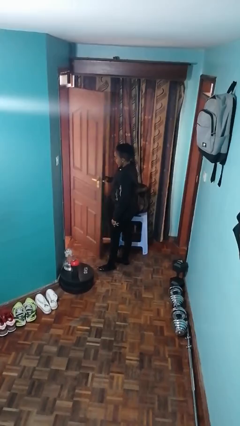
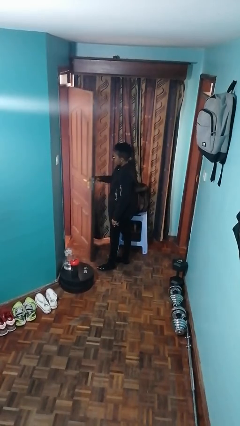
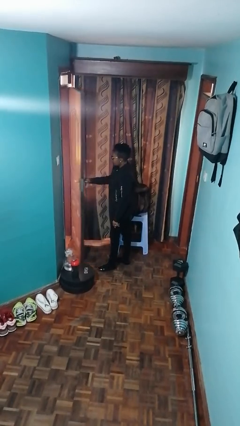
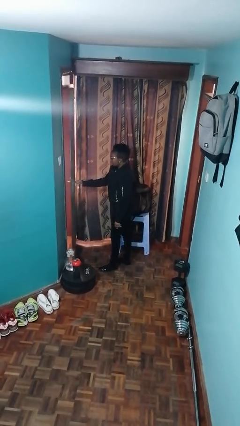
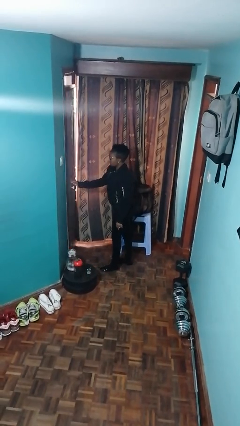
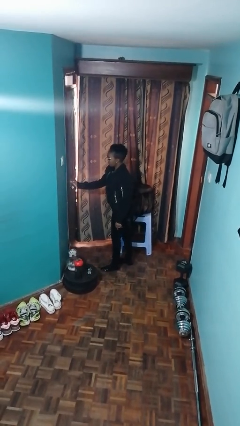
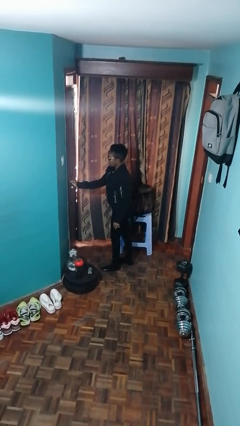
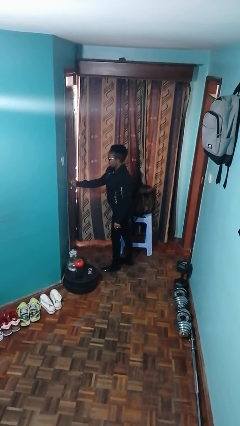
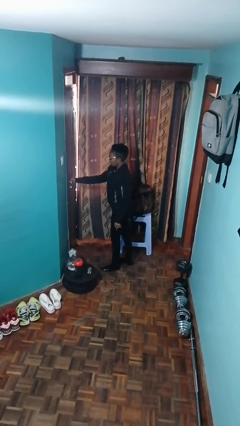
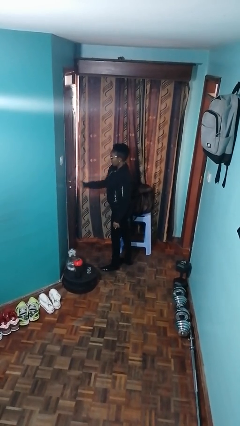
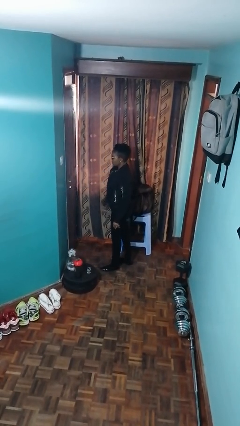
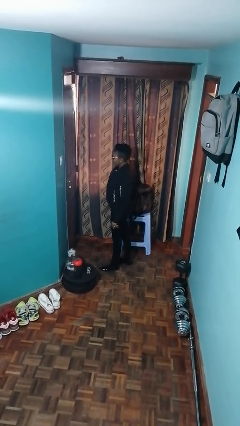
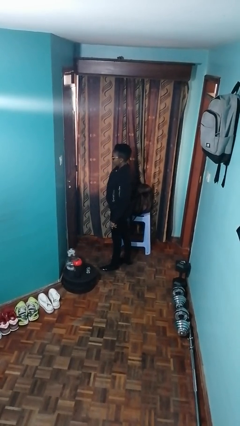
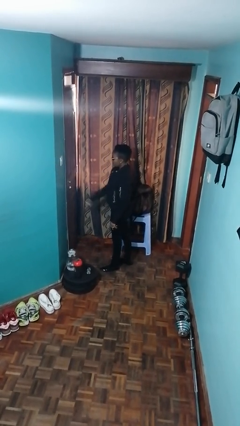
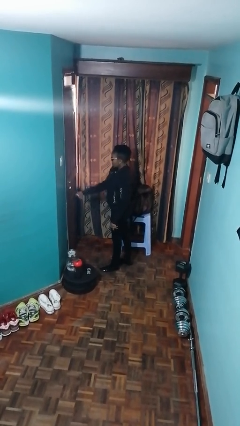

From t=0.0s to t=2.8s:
person closes facility door

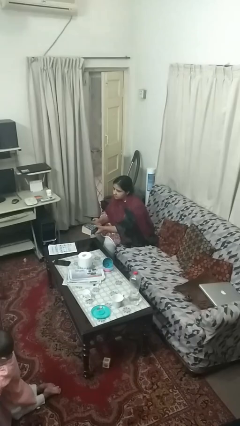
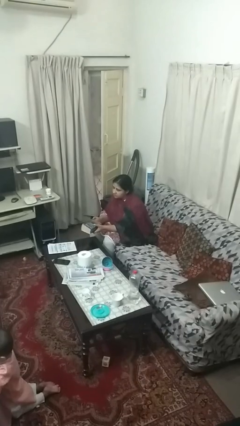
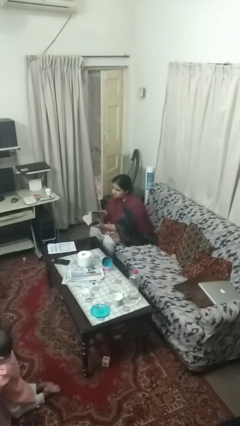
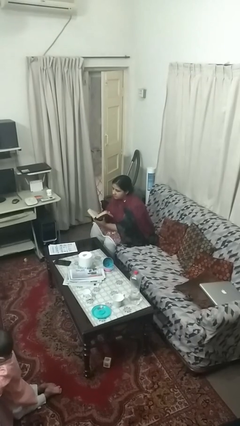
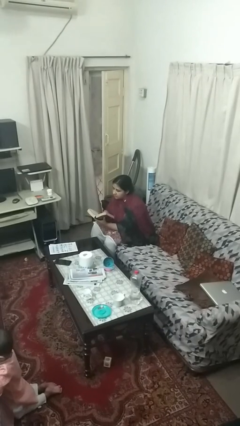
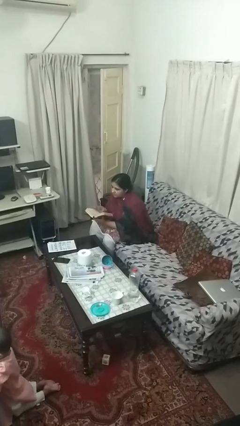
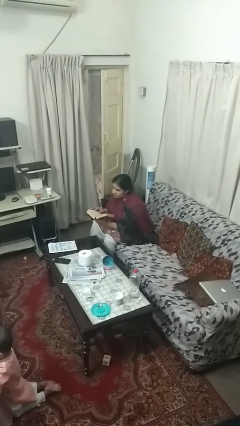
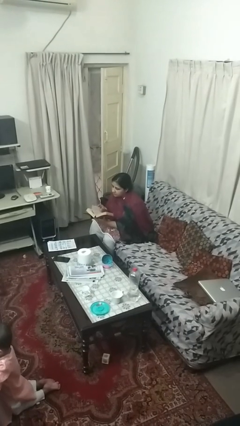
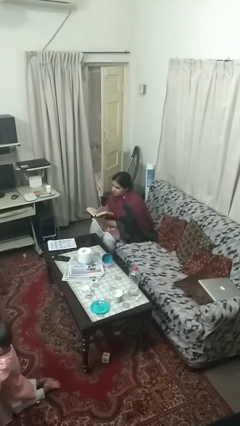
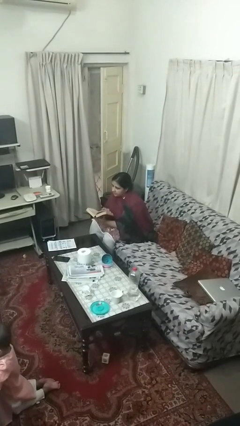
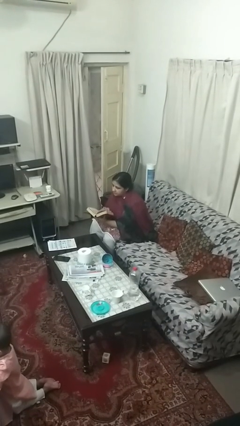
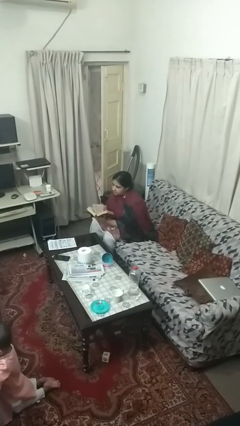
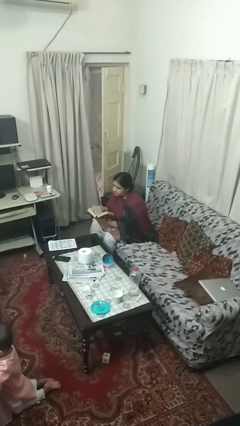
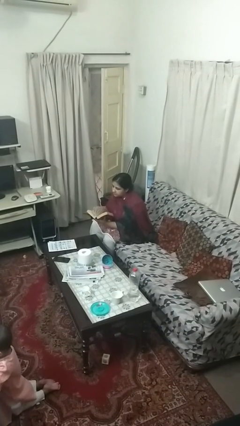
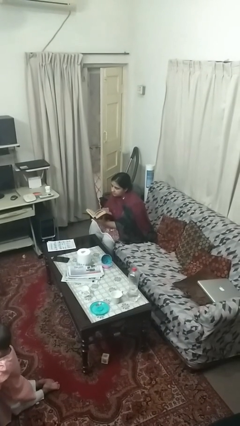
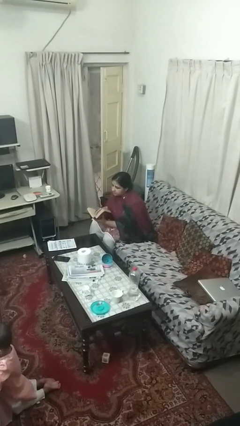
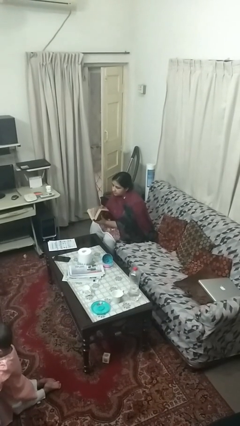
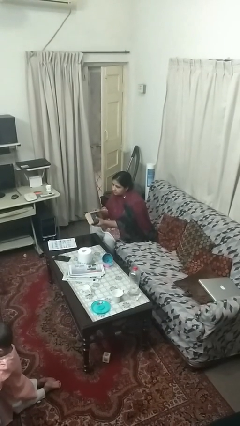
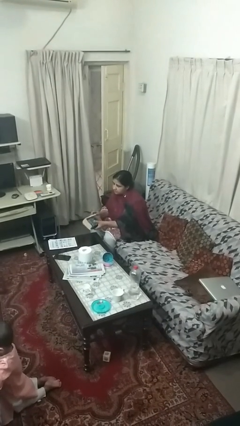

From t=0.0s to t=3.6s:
person reads book

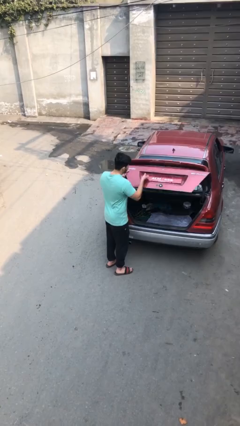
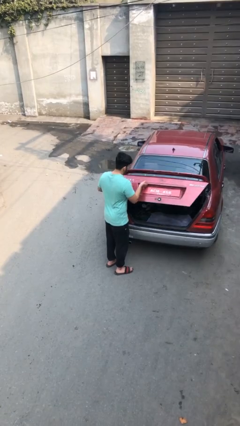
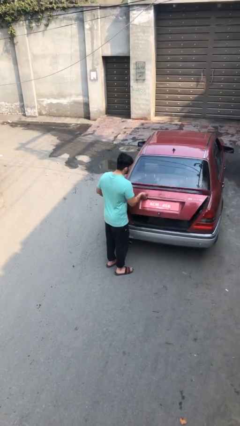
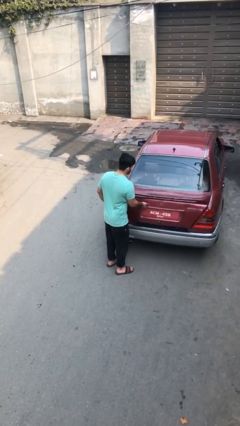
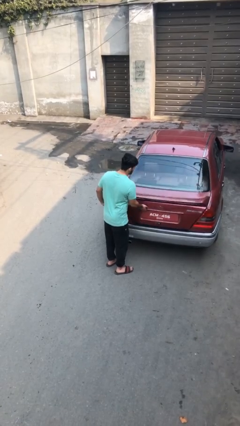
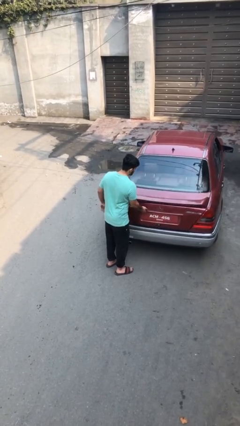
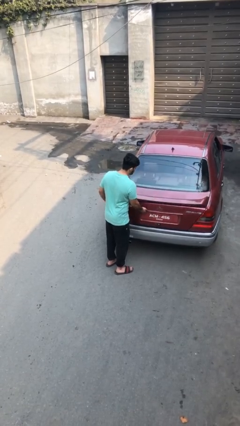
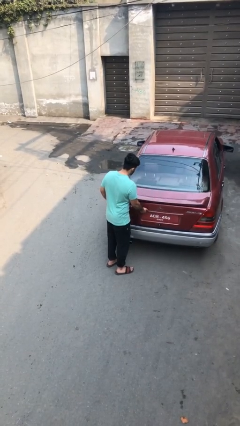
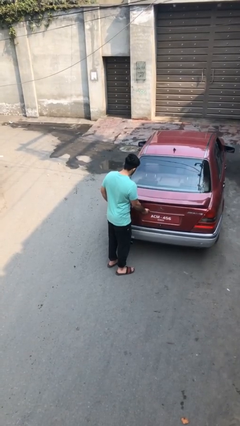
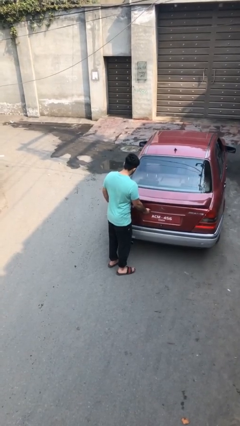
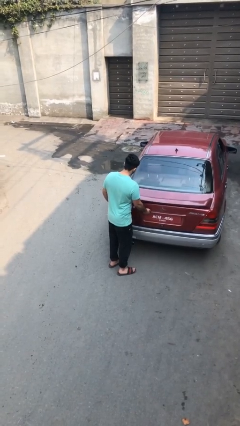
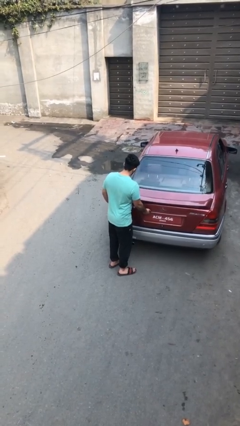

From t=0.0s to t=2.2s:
person closes car trunk

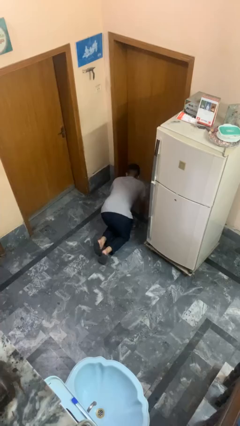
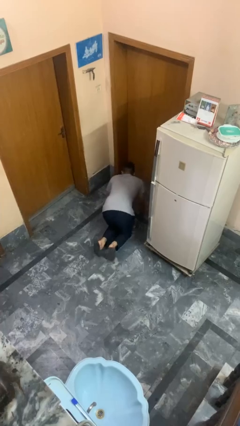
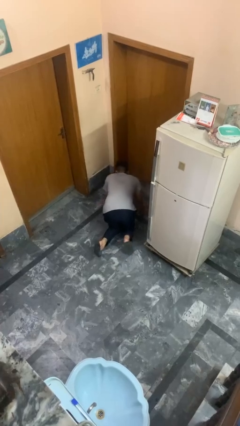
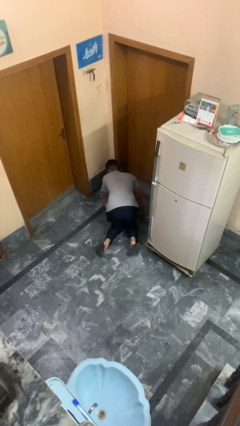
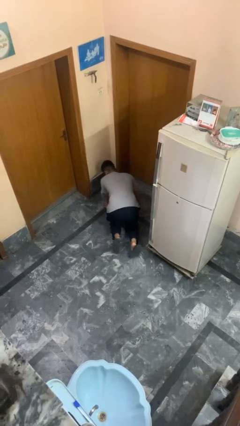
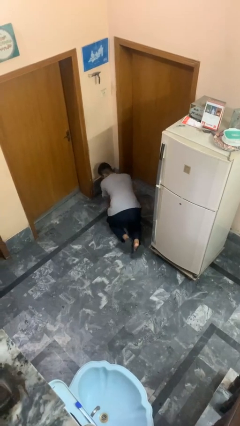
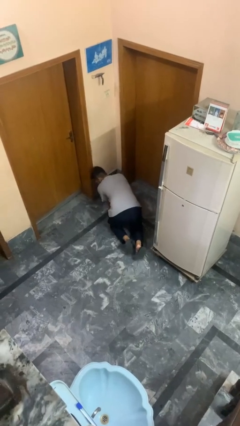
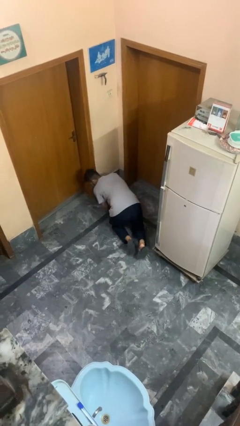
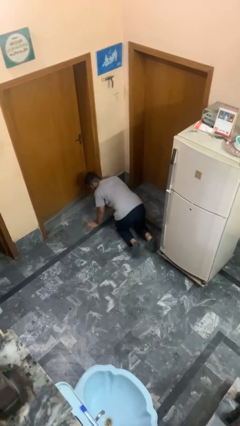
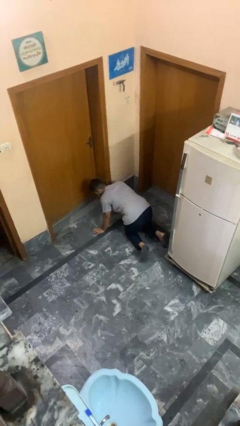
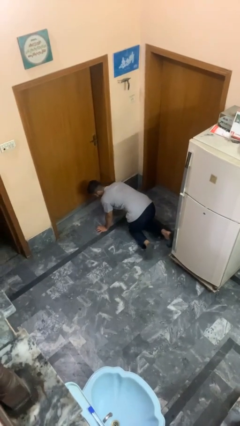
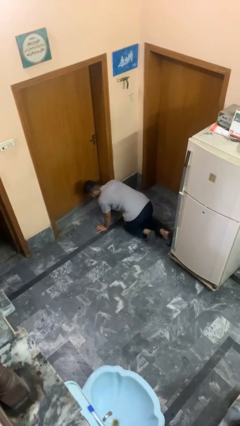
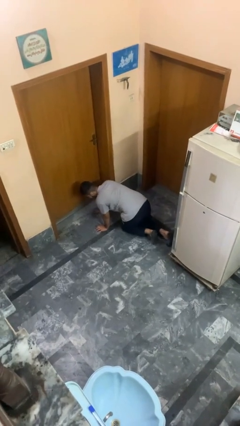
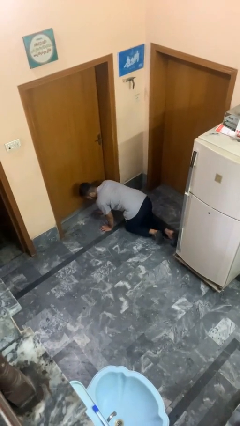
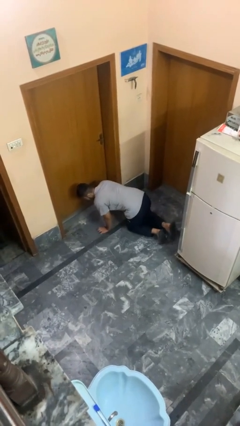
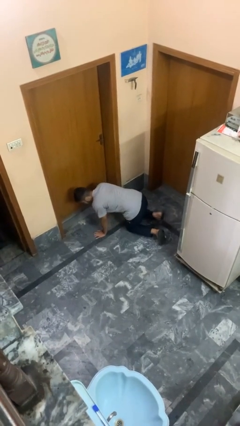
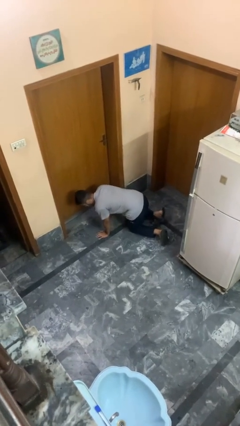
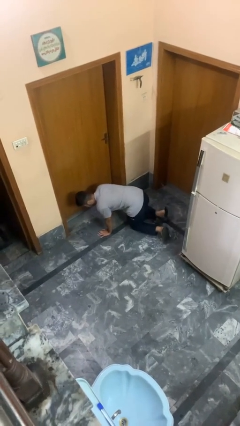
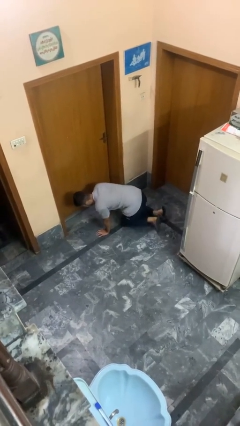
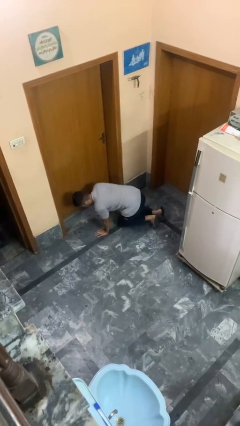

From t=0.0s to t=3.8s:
person crawls

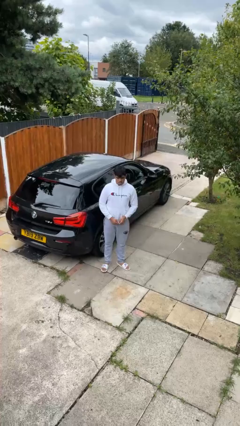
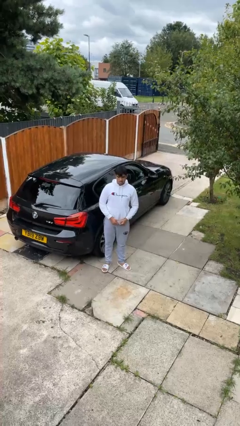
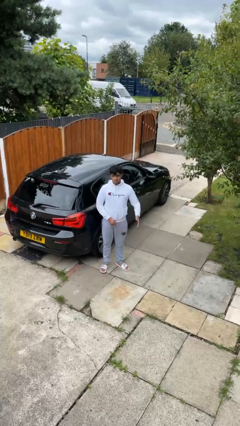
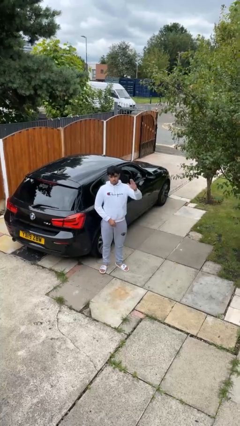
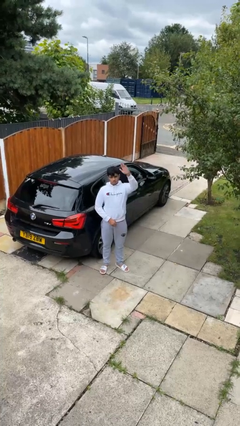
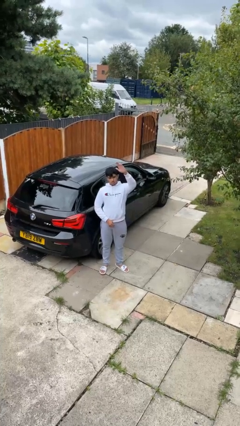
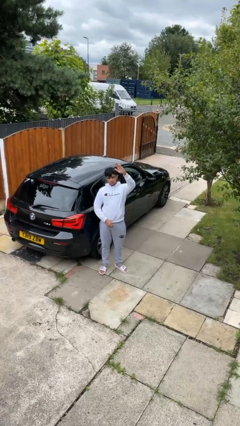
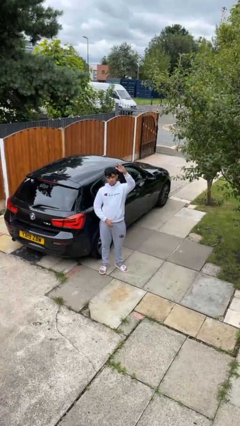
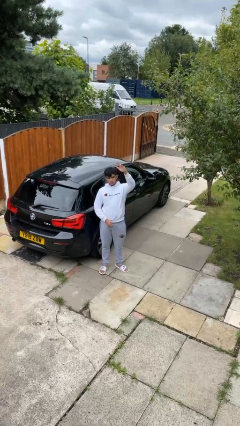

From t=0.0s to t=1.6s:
person gestures raise hand

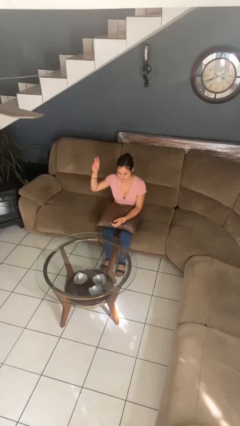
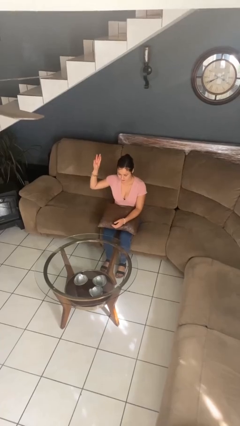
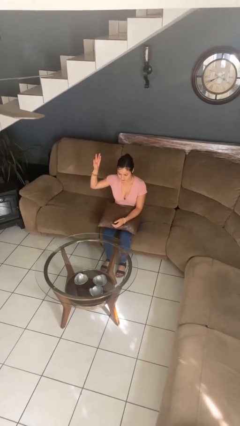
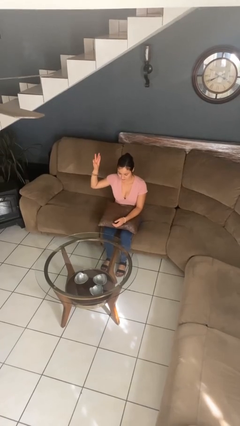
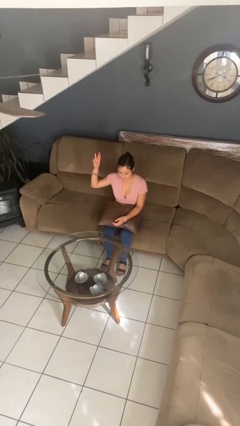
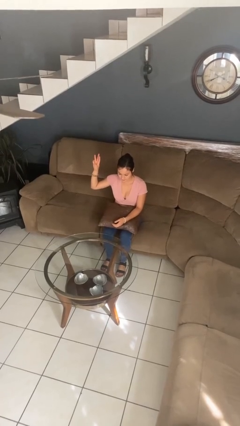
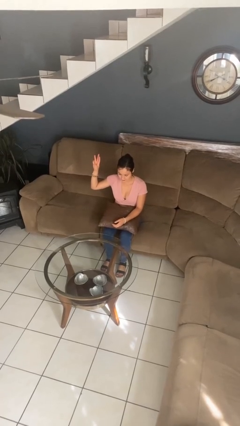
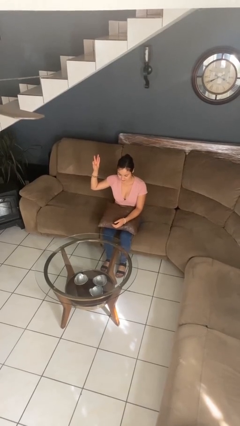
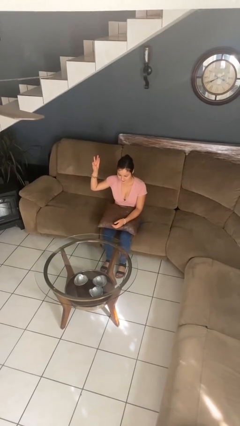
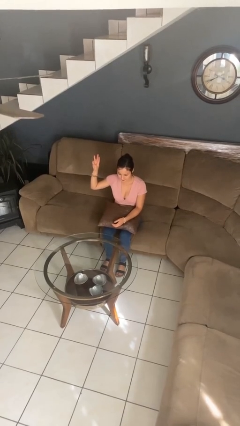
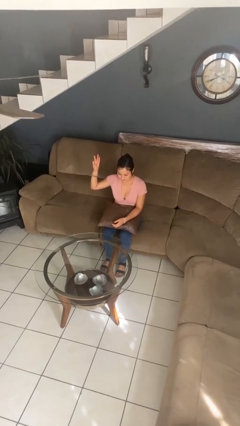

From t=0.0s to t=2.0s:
person gestures number three

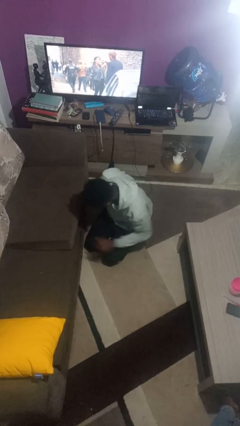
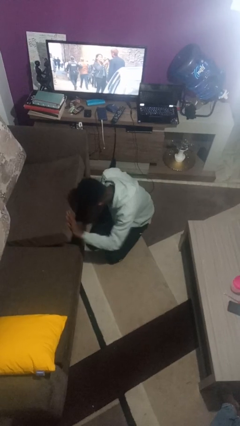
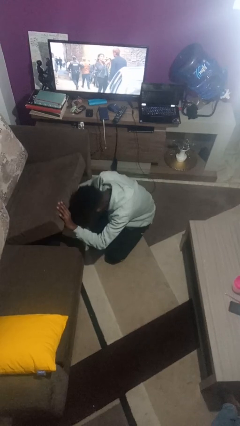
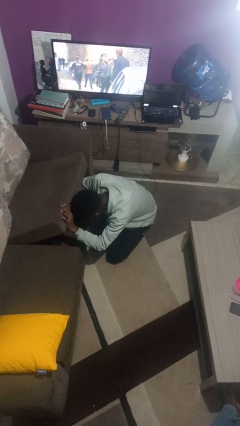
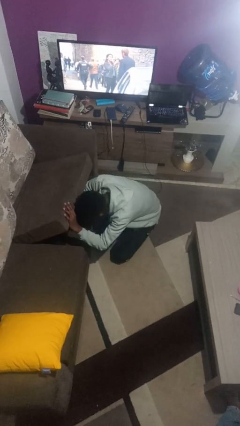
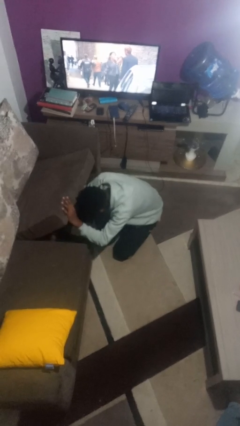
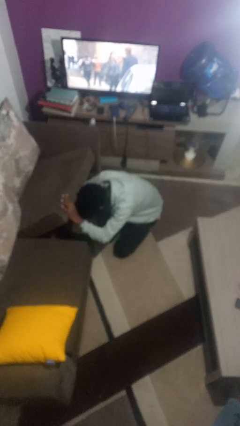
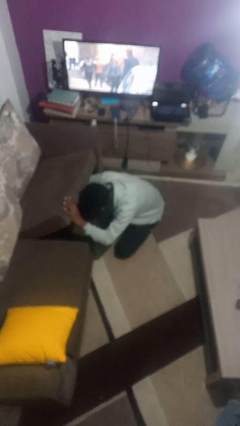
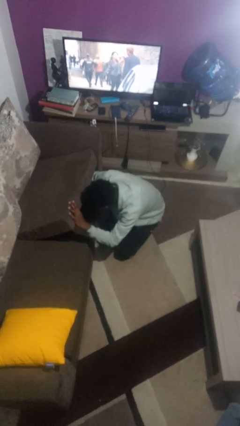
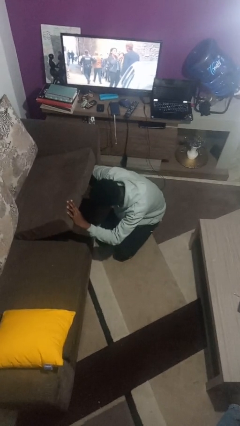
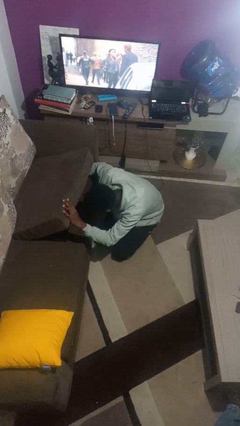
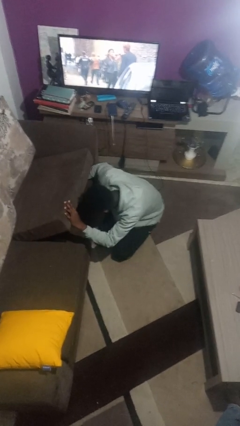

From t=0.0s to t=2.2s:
person searches under couch
